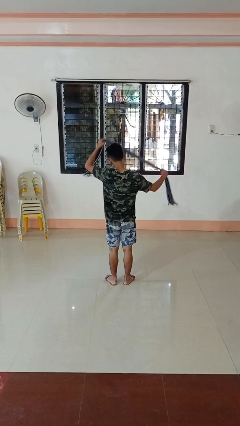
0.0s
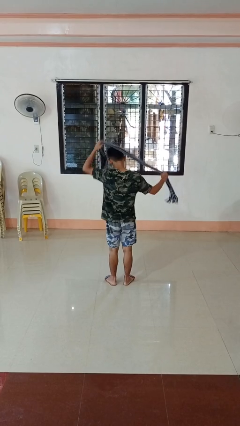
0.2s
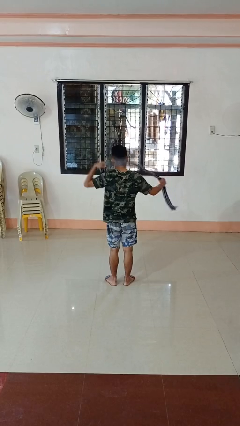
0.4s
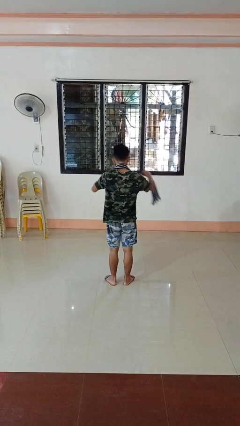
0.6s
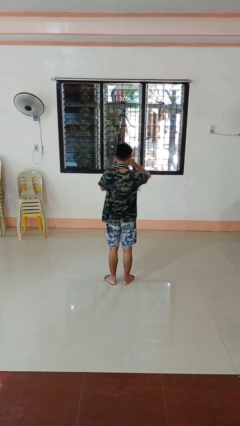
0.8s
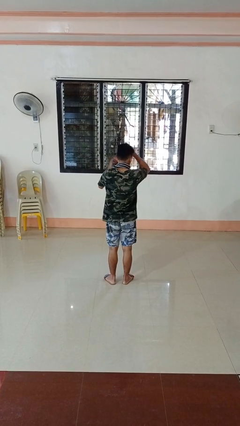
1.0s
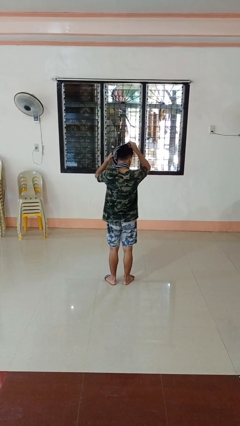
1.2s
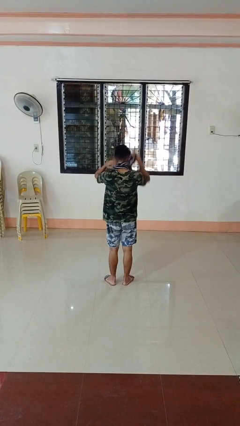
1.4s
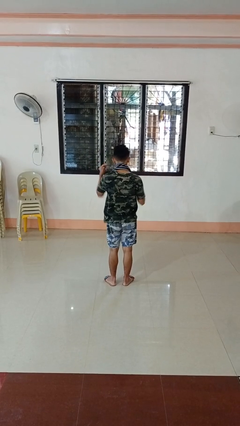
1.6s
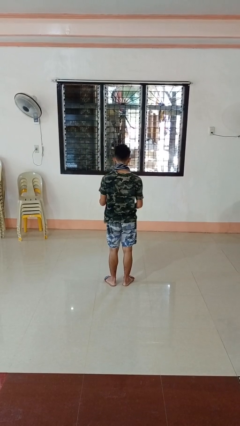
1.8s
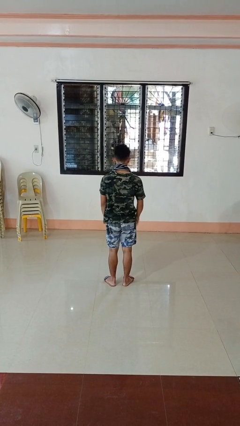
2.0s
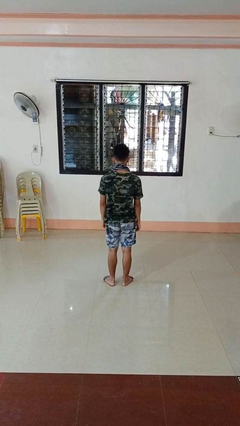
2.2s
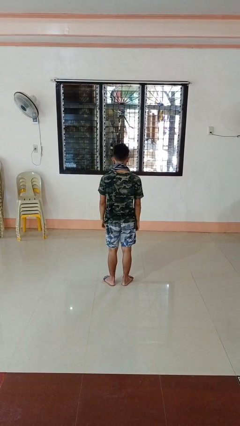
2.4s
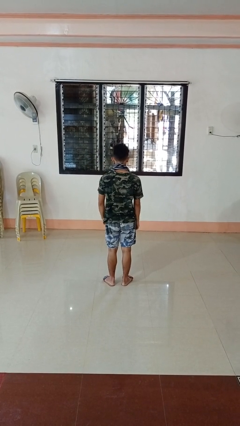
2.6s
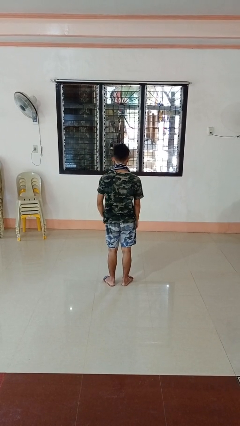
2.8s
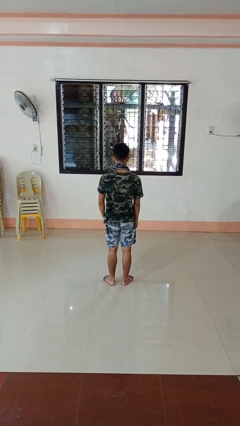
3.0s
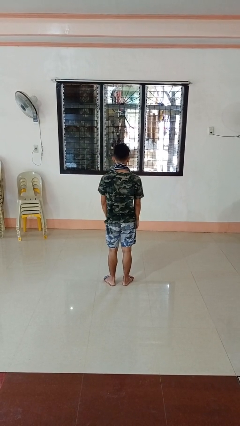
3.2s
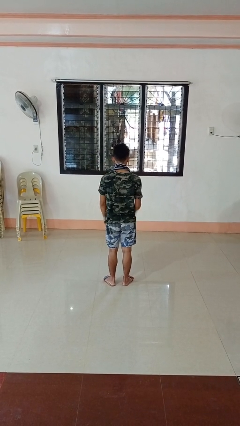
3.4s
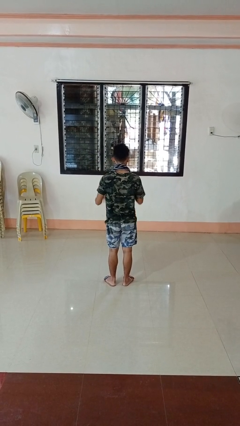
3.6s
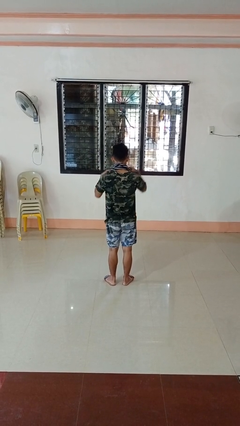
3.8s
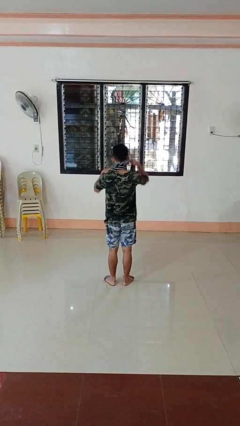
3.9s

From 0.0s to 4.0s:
person puts on scarf

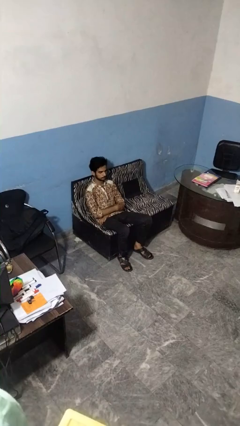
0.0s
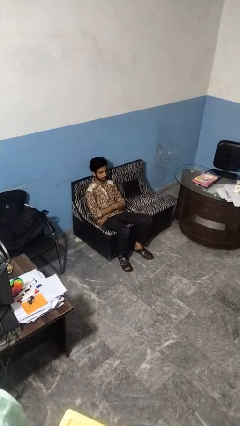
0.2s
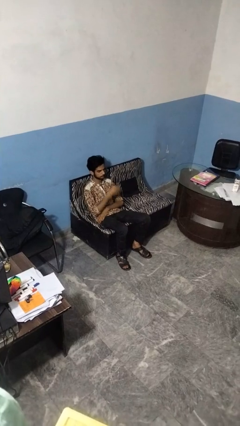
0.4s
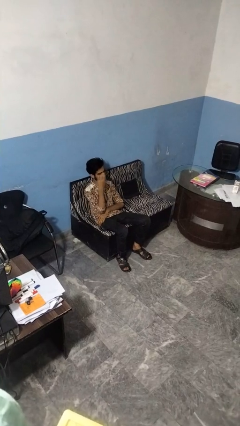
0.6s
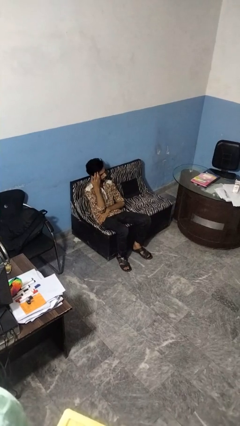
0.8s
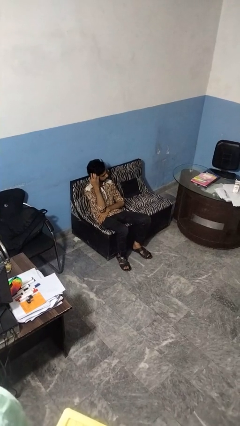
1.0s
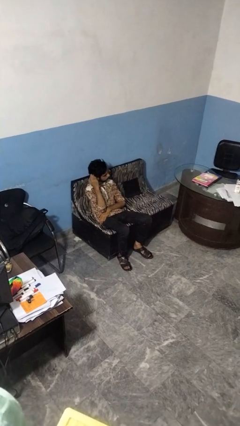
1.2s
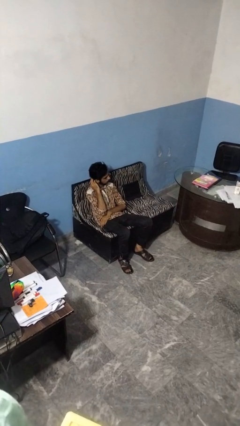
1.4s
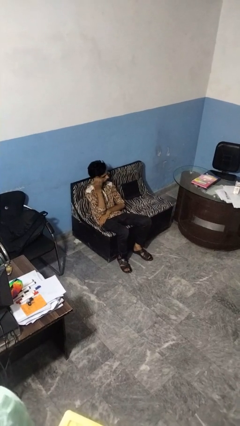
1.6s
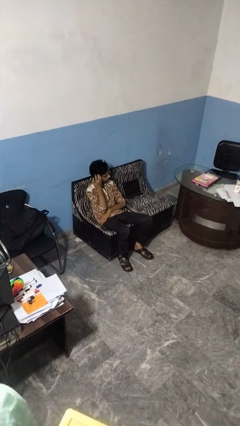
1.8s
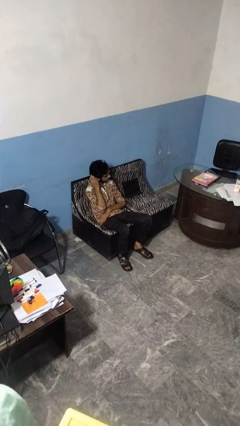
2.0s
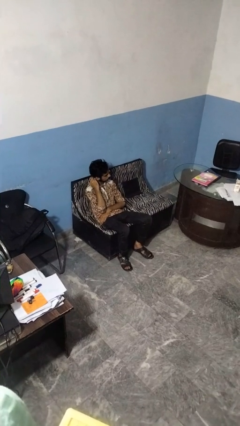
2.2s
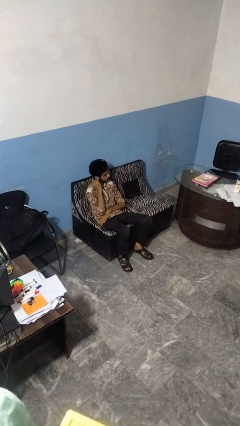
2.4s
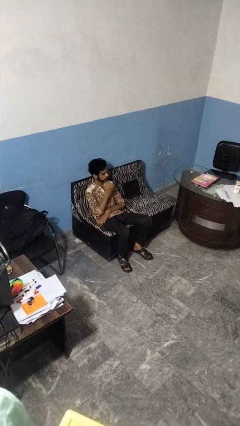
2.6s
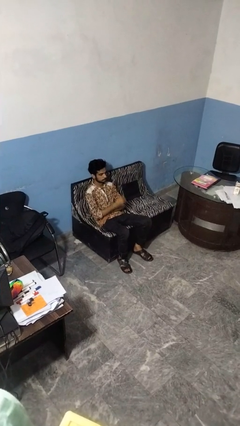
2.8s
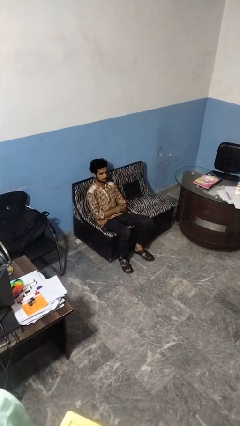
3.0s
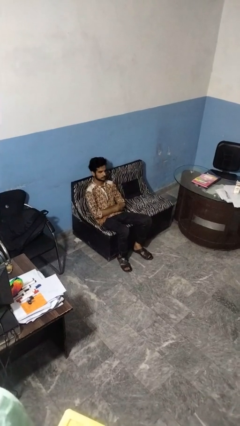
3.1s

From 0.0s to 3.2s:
person strokes hair

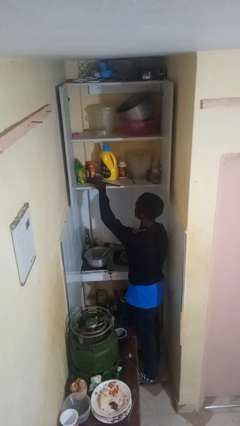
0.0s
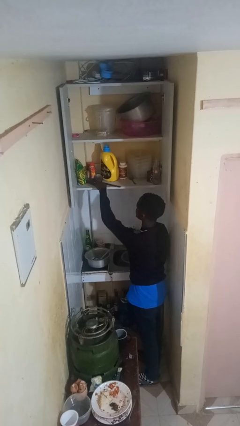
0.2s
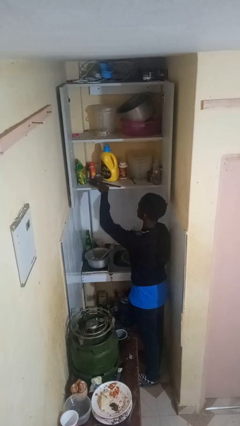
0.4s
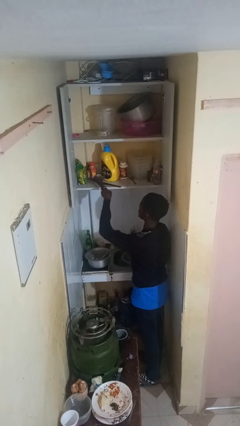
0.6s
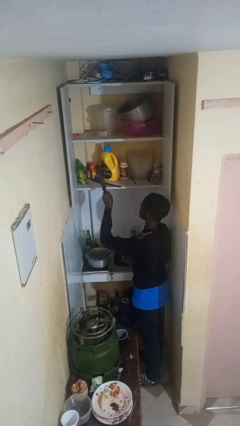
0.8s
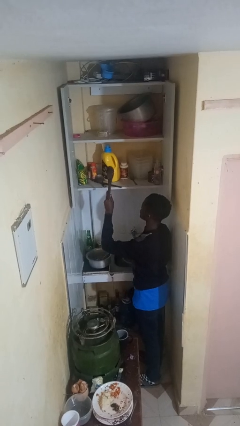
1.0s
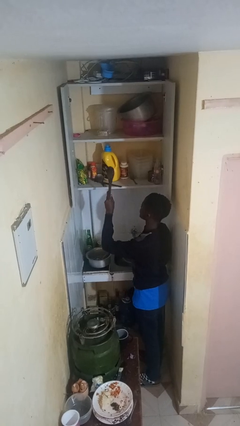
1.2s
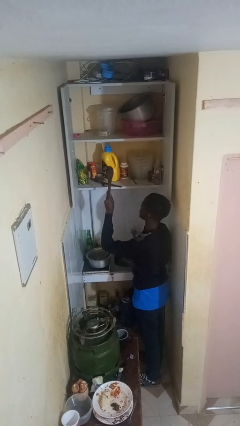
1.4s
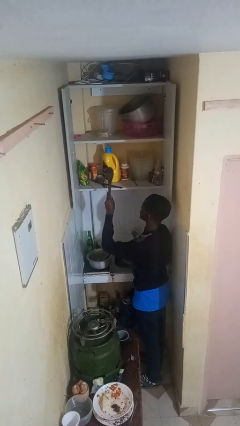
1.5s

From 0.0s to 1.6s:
person takes object from kitchen drawer

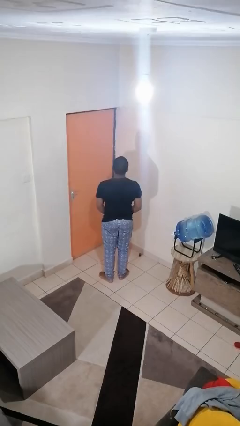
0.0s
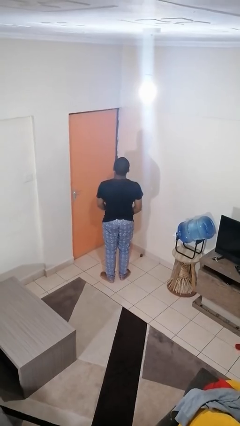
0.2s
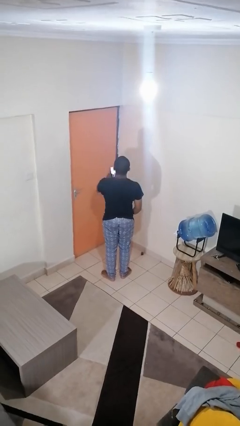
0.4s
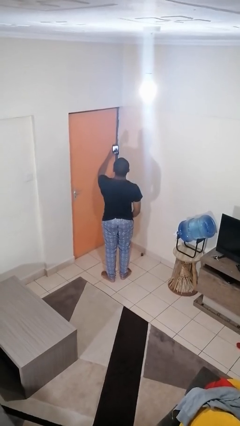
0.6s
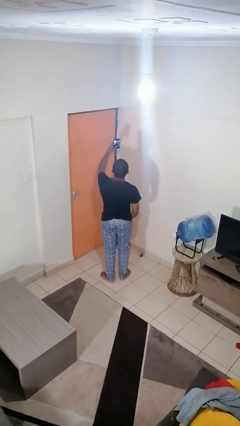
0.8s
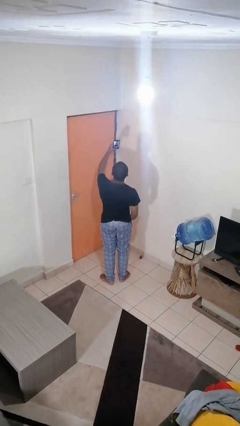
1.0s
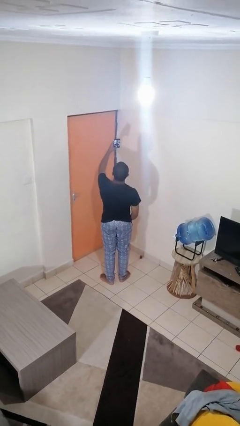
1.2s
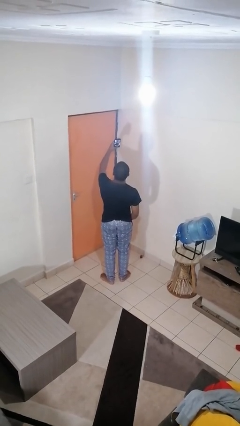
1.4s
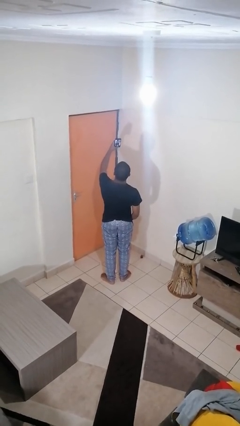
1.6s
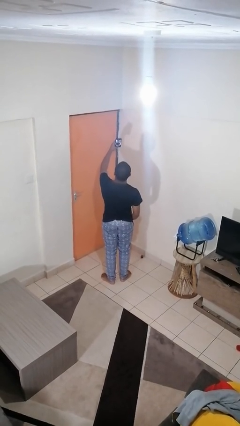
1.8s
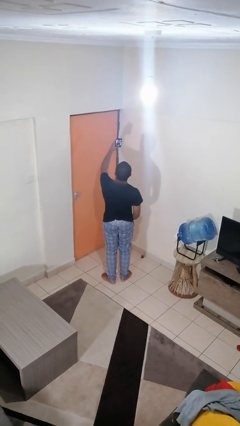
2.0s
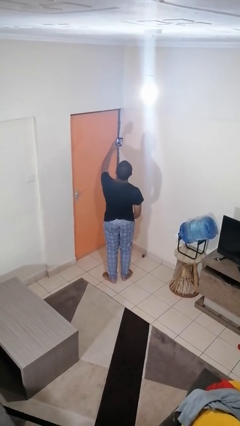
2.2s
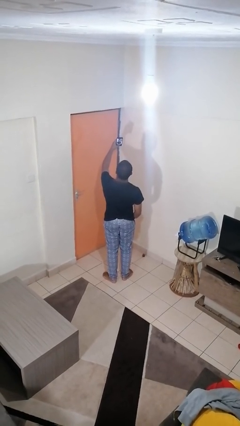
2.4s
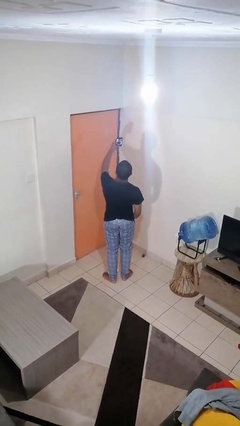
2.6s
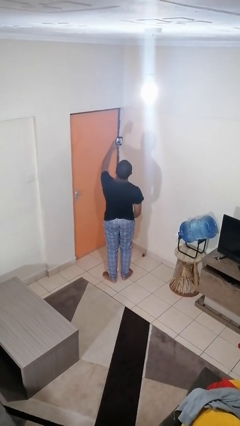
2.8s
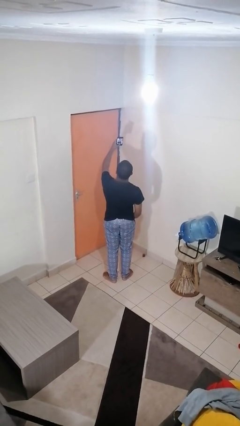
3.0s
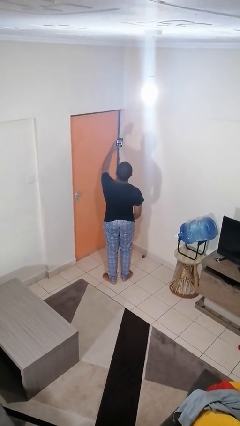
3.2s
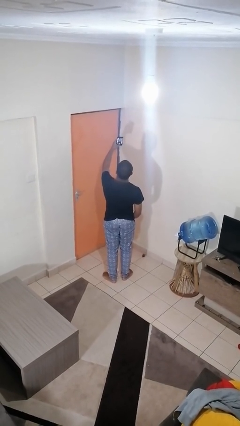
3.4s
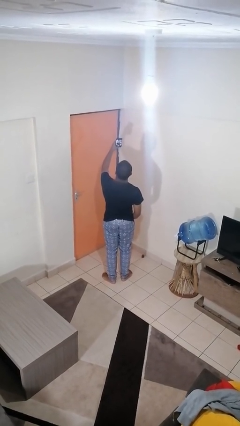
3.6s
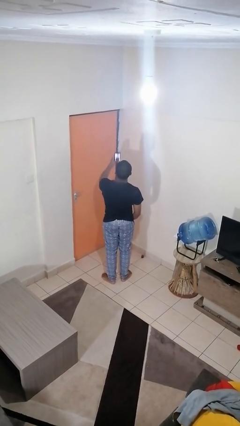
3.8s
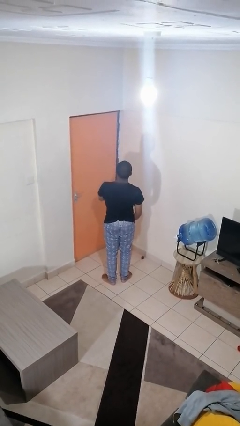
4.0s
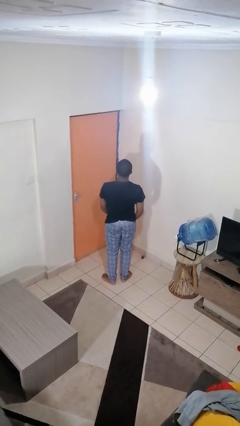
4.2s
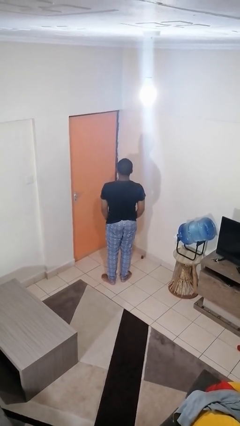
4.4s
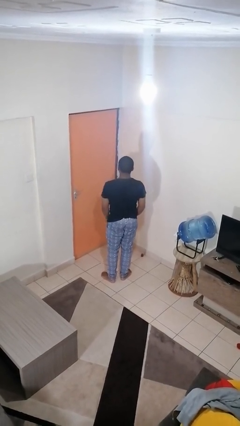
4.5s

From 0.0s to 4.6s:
person takes selfie

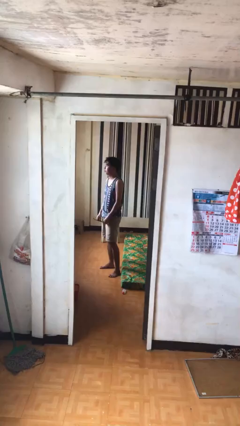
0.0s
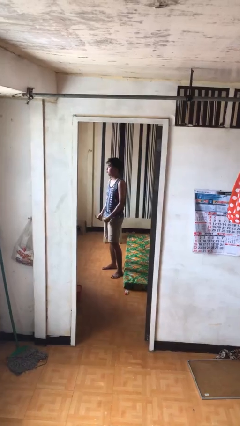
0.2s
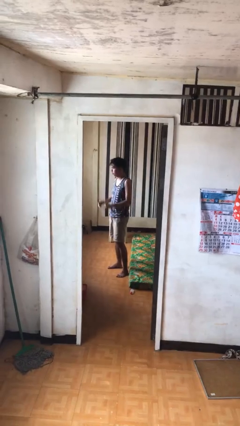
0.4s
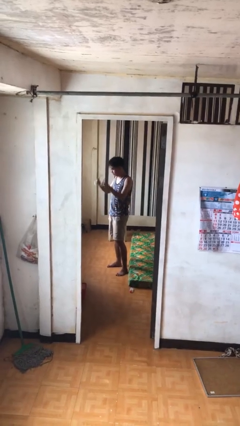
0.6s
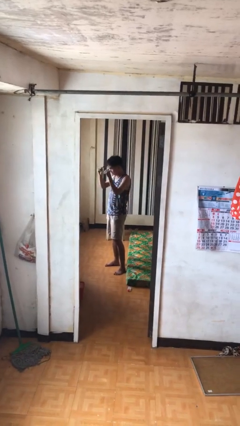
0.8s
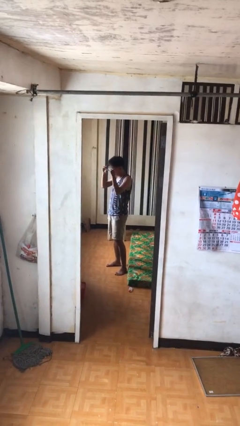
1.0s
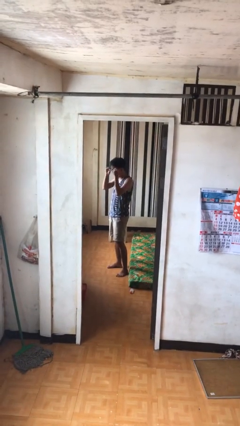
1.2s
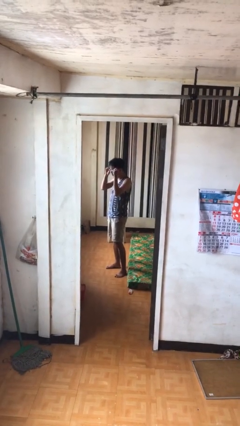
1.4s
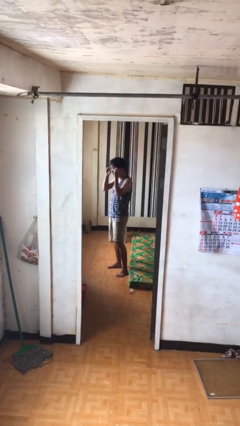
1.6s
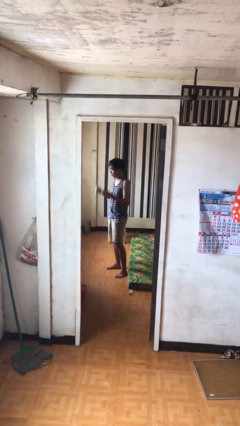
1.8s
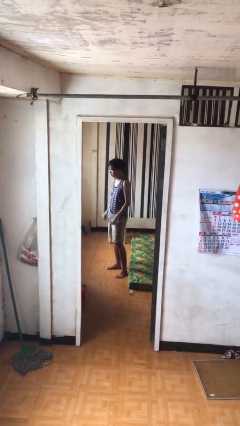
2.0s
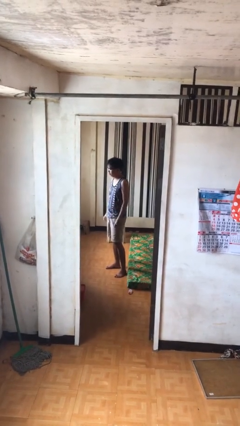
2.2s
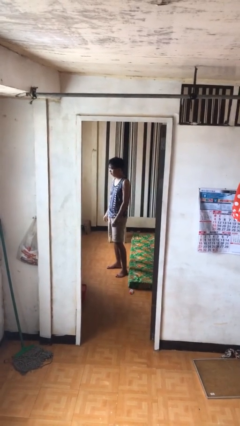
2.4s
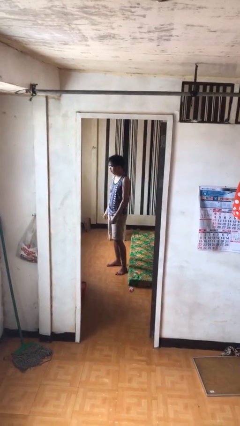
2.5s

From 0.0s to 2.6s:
person puts on glasses

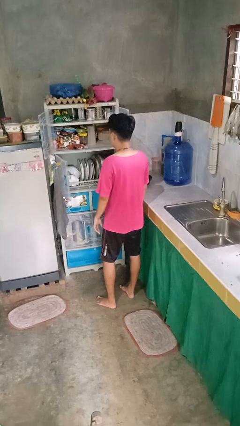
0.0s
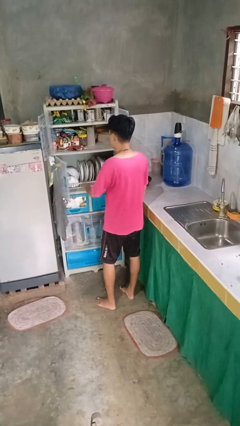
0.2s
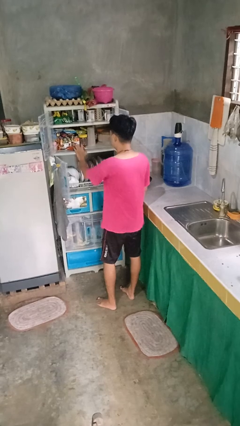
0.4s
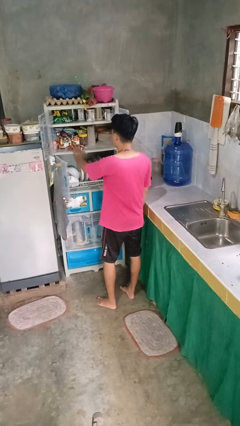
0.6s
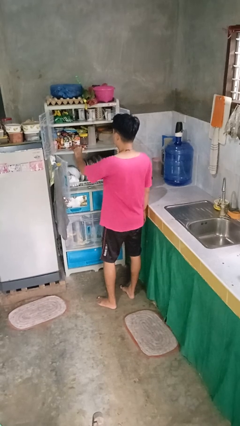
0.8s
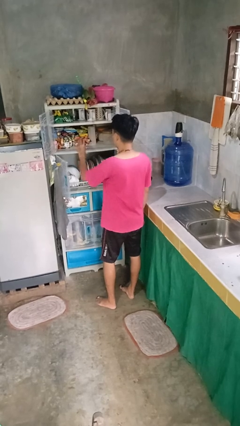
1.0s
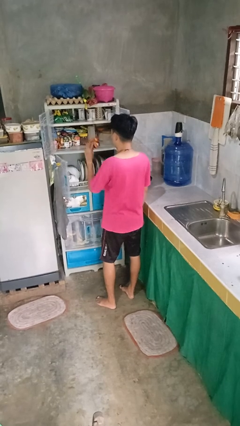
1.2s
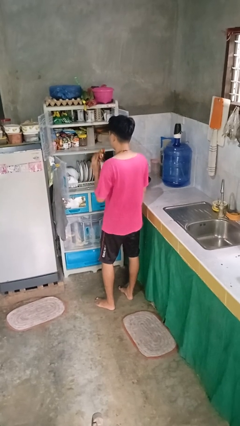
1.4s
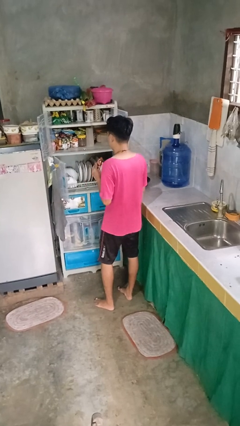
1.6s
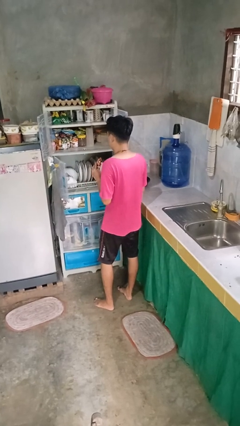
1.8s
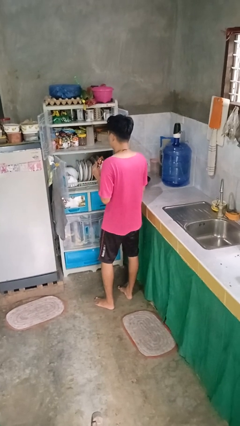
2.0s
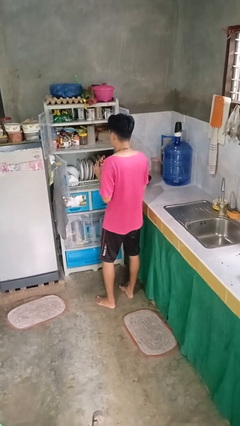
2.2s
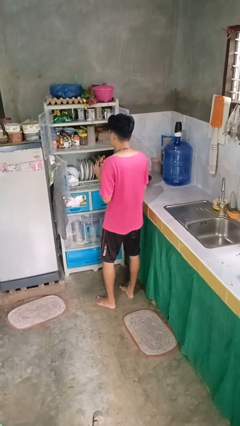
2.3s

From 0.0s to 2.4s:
person takes object from cabinet
